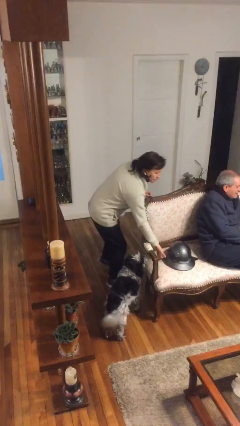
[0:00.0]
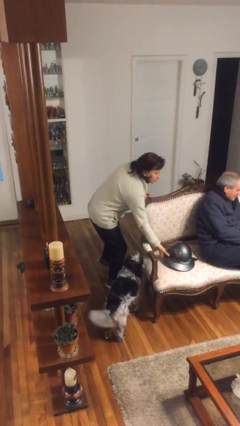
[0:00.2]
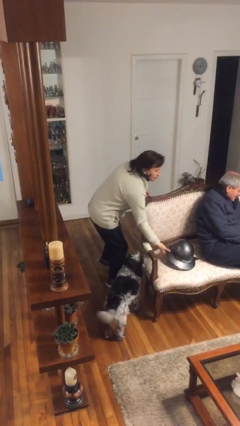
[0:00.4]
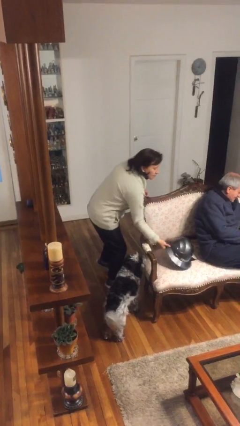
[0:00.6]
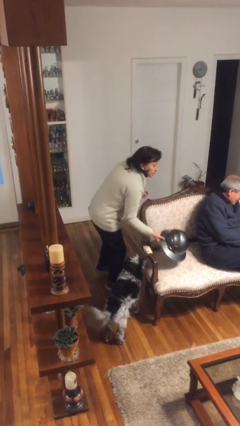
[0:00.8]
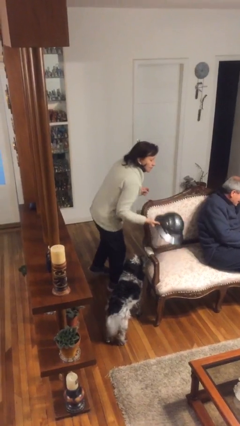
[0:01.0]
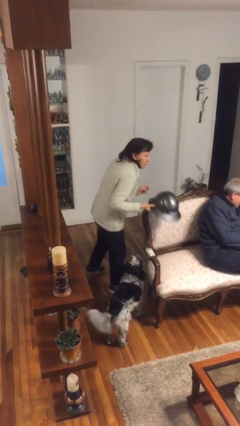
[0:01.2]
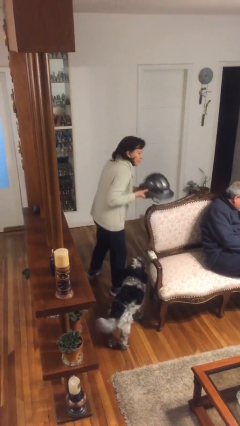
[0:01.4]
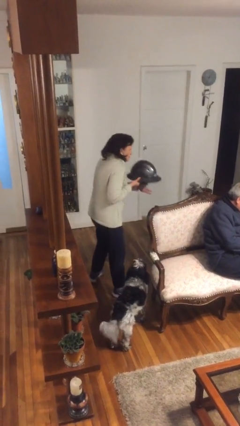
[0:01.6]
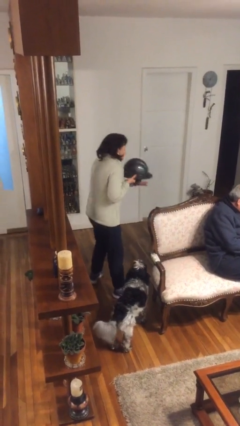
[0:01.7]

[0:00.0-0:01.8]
person steals object from person

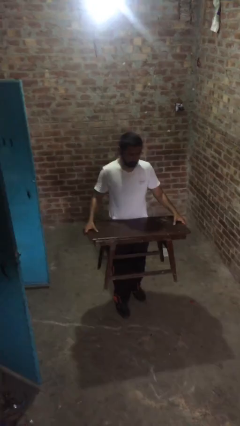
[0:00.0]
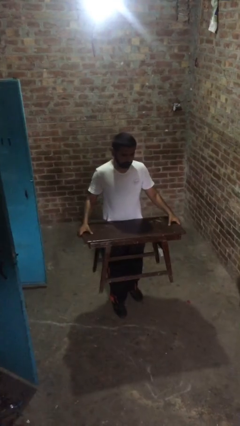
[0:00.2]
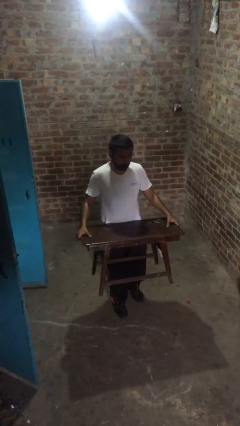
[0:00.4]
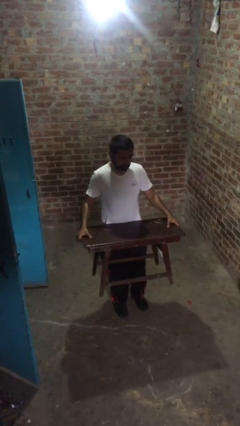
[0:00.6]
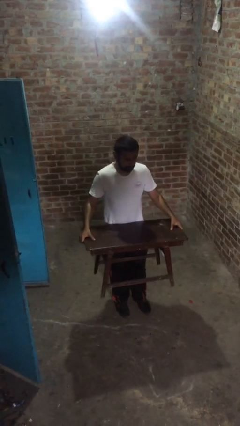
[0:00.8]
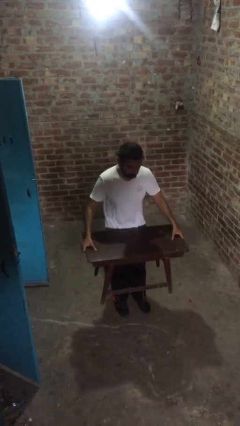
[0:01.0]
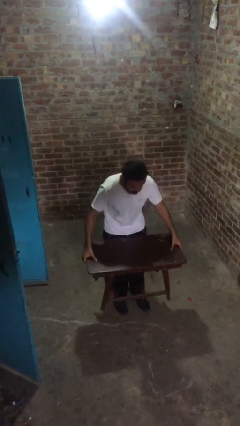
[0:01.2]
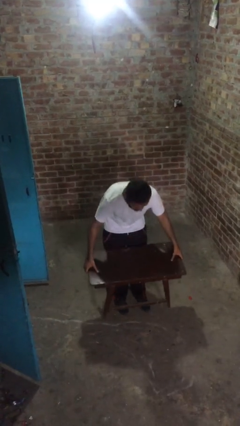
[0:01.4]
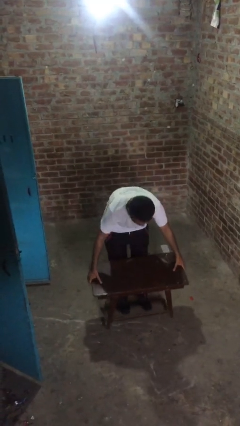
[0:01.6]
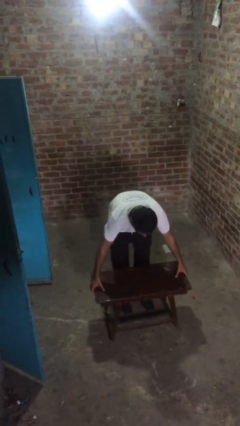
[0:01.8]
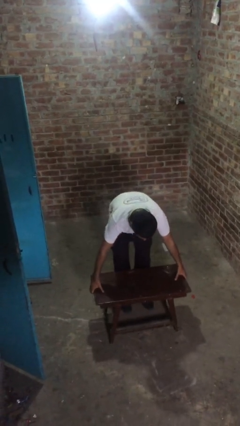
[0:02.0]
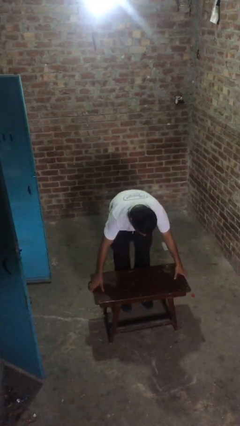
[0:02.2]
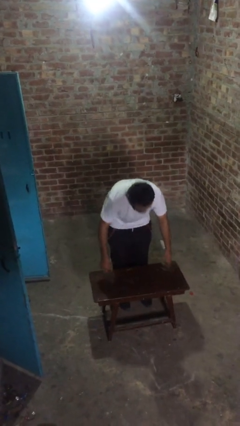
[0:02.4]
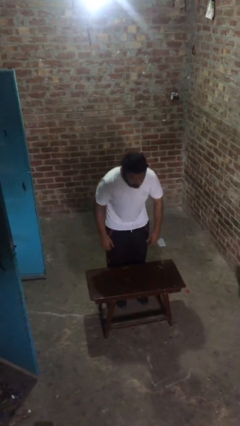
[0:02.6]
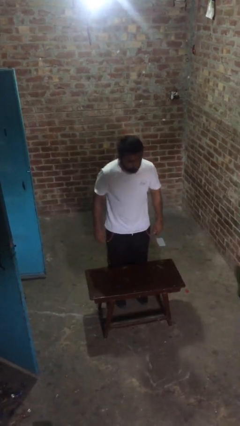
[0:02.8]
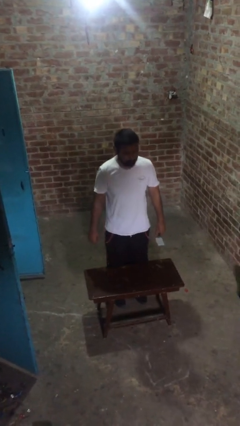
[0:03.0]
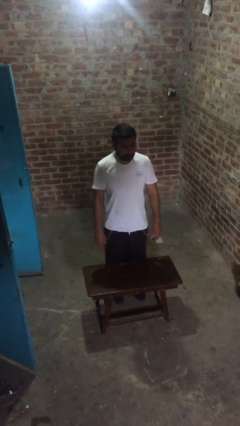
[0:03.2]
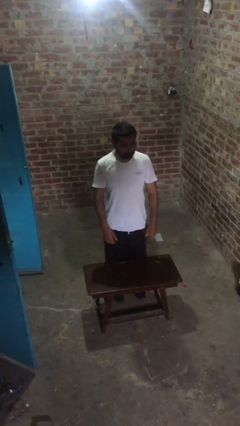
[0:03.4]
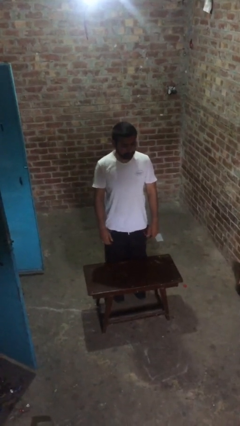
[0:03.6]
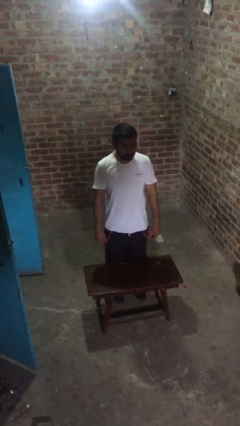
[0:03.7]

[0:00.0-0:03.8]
person puts down object on floor

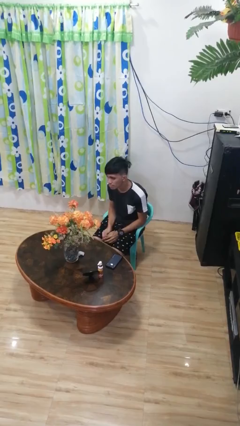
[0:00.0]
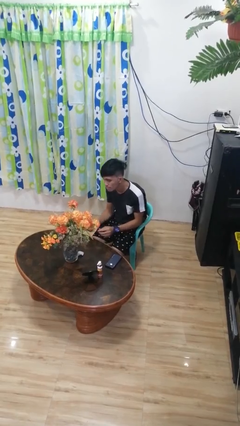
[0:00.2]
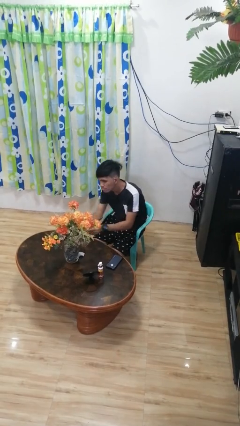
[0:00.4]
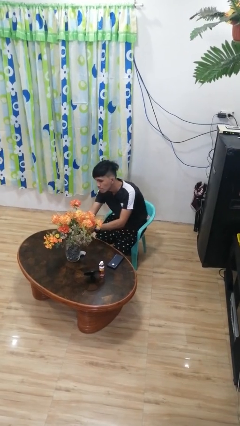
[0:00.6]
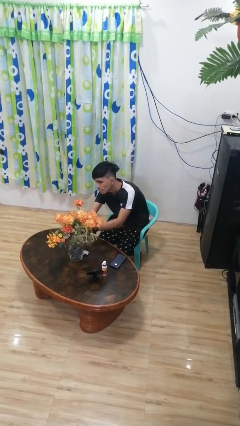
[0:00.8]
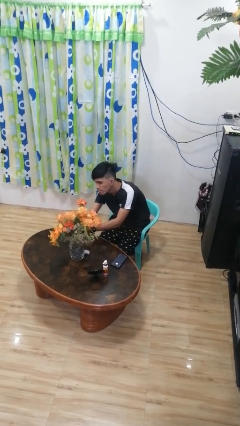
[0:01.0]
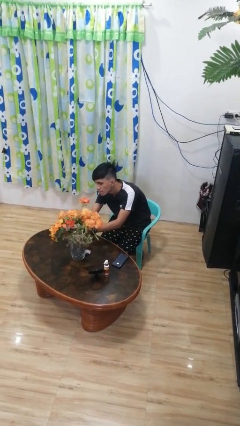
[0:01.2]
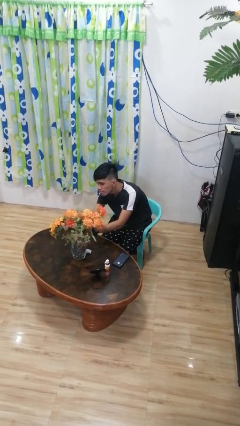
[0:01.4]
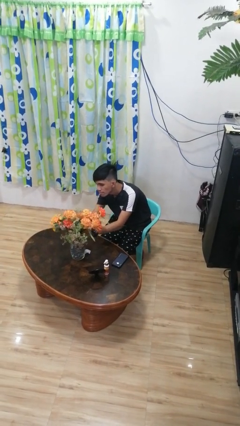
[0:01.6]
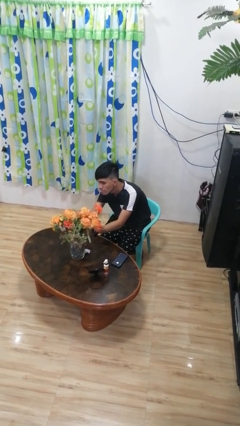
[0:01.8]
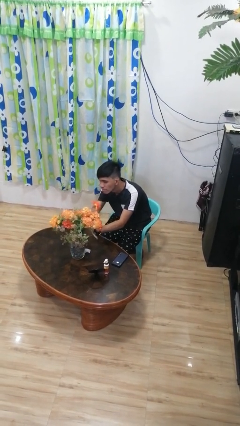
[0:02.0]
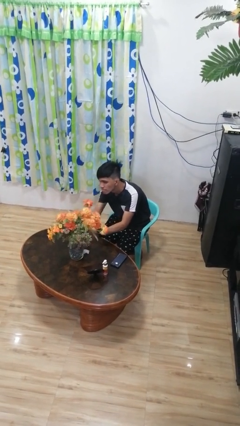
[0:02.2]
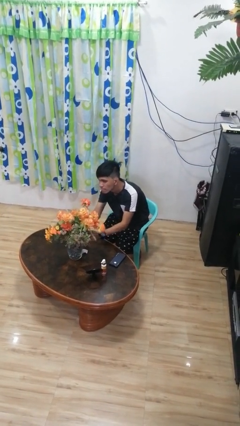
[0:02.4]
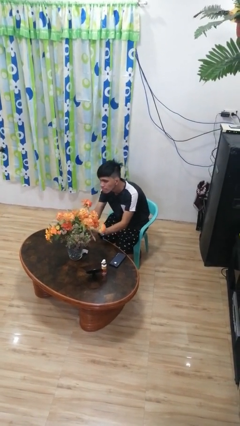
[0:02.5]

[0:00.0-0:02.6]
person arranges flowers in vase

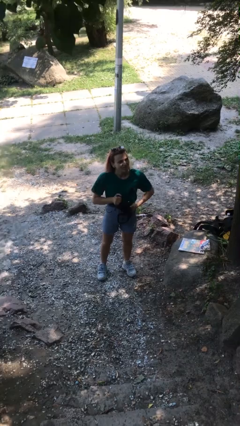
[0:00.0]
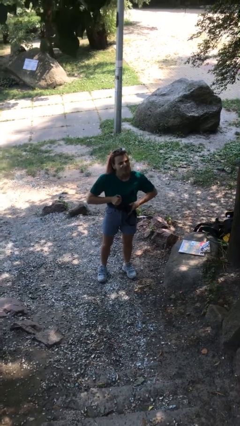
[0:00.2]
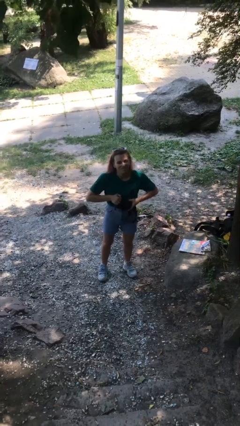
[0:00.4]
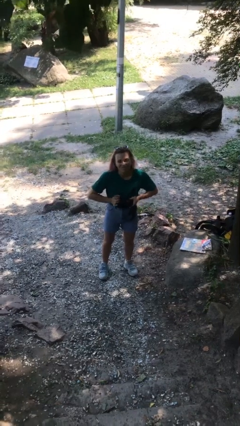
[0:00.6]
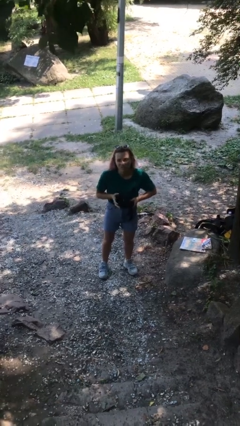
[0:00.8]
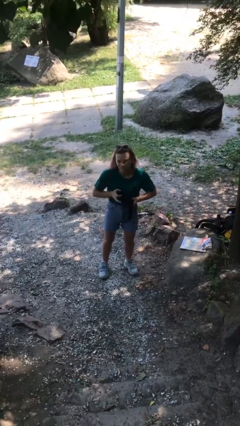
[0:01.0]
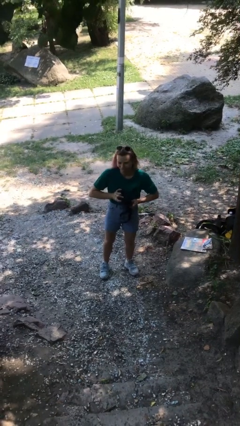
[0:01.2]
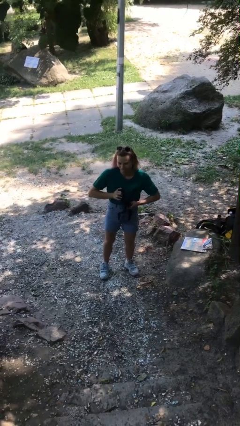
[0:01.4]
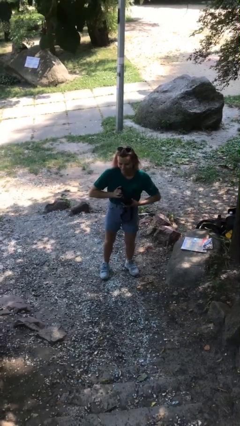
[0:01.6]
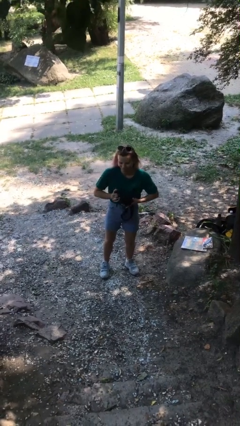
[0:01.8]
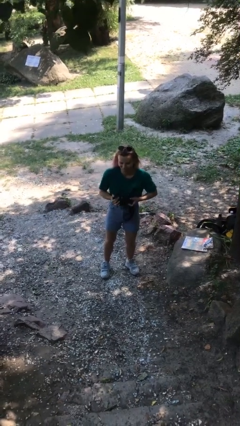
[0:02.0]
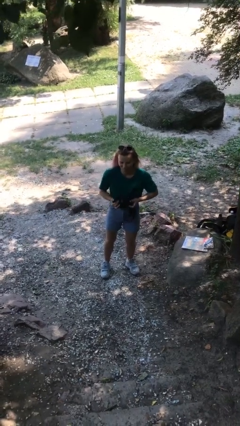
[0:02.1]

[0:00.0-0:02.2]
person squeezes object

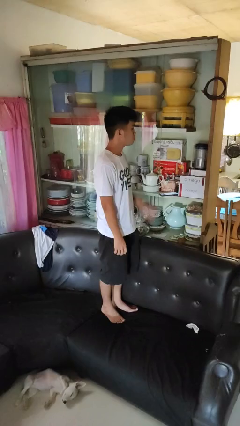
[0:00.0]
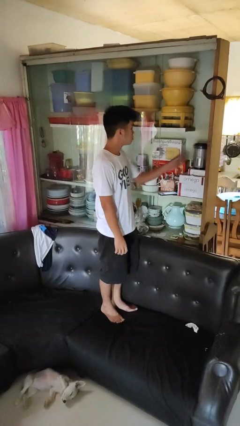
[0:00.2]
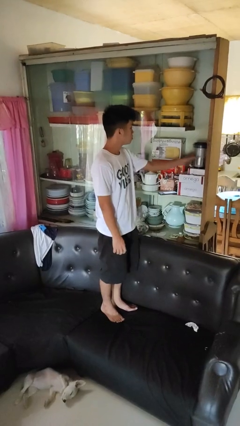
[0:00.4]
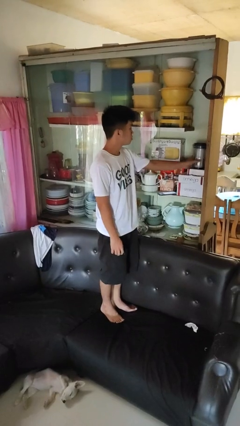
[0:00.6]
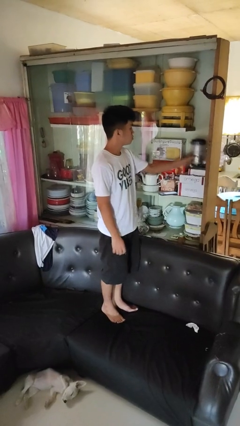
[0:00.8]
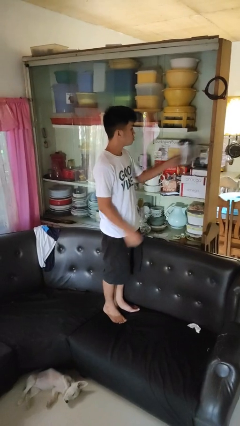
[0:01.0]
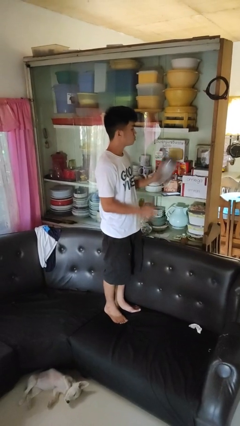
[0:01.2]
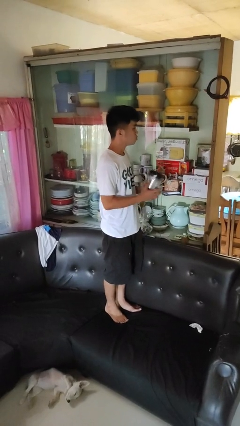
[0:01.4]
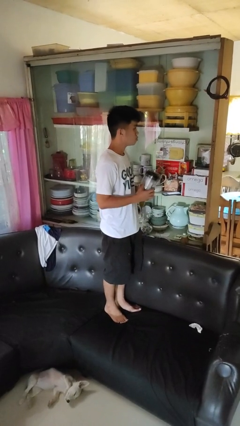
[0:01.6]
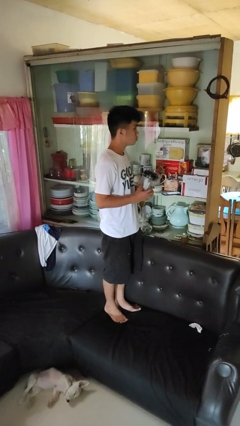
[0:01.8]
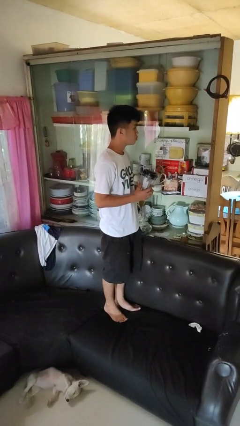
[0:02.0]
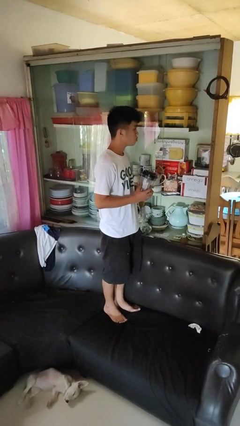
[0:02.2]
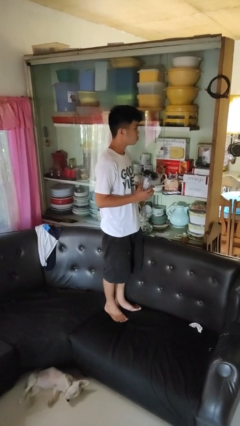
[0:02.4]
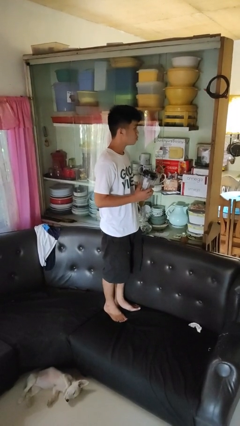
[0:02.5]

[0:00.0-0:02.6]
person picks up object from cabinet

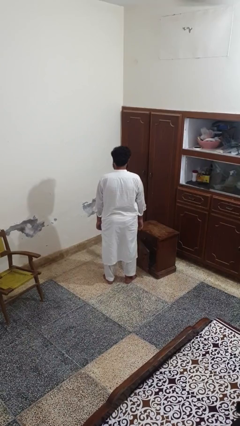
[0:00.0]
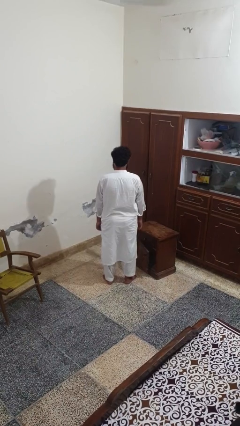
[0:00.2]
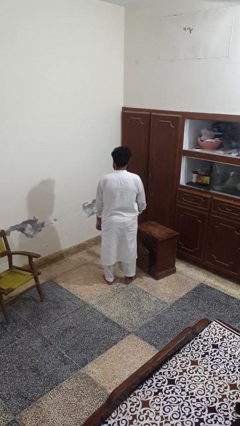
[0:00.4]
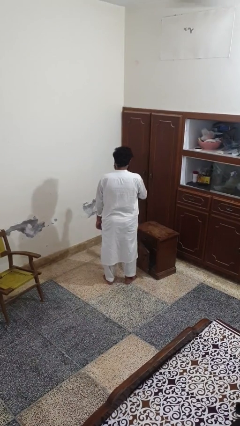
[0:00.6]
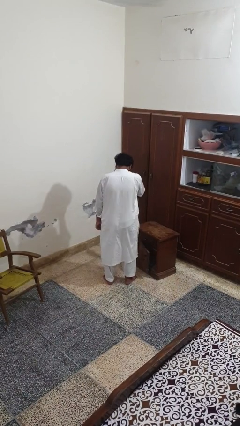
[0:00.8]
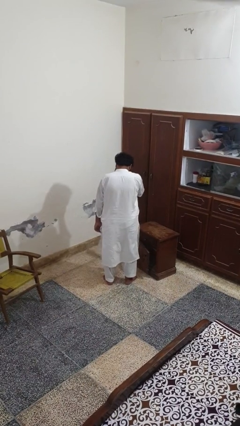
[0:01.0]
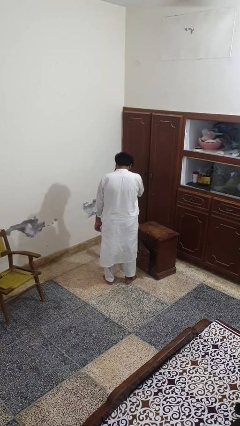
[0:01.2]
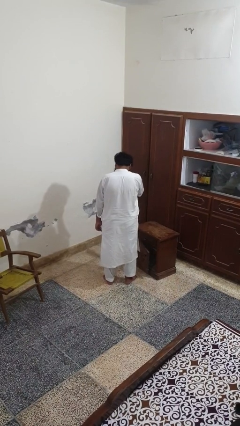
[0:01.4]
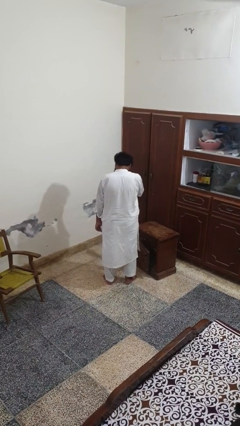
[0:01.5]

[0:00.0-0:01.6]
person sneezes into hand

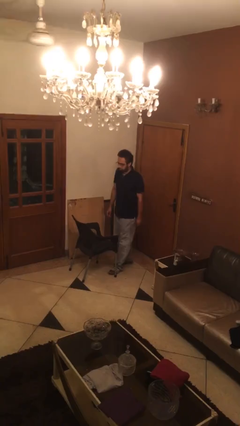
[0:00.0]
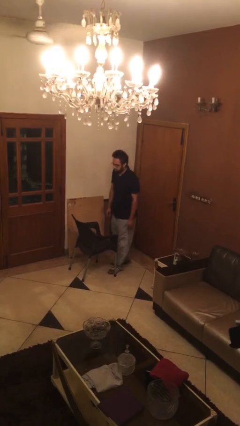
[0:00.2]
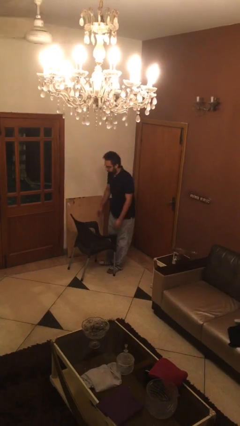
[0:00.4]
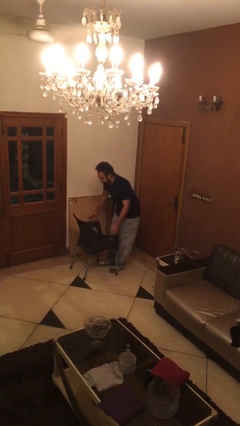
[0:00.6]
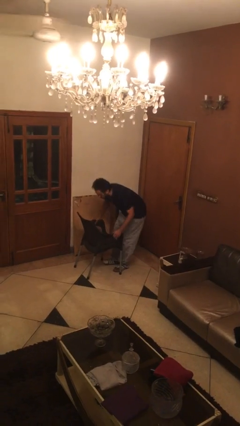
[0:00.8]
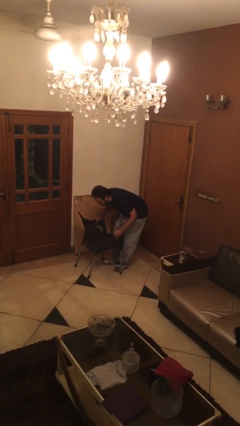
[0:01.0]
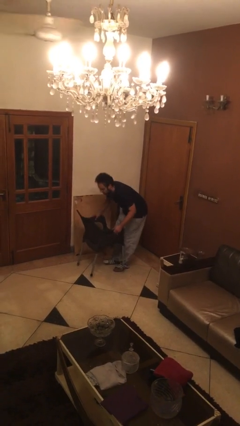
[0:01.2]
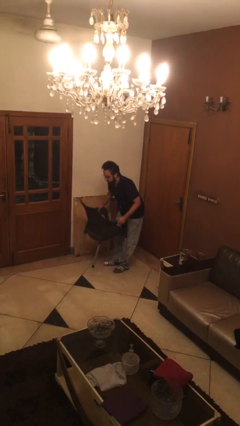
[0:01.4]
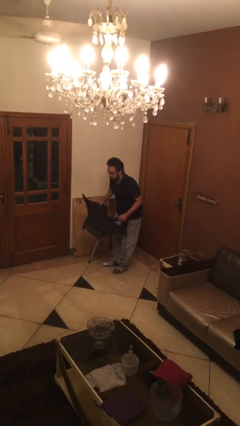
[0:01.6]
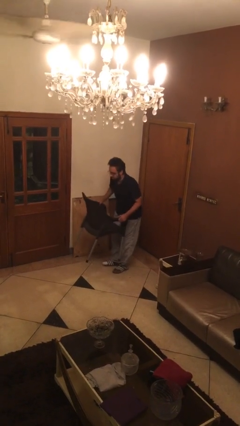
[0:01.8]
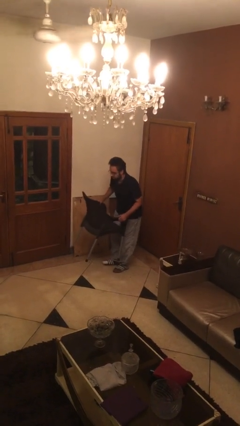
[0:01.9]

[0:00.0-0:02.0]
person picks up object from floor
